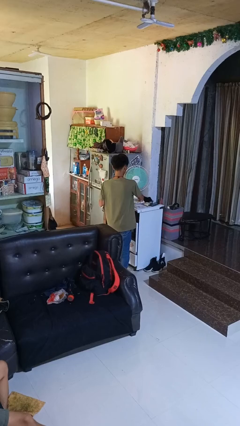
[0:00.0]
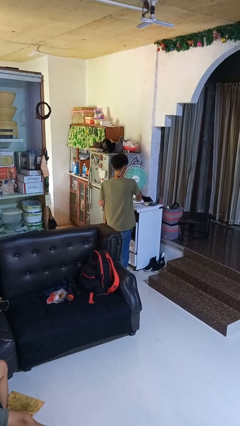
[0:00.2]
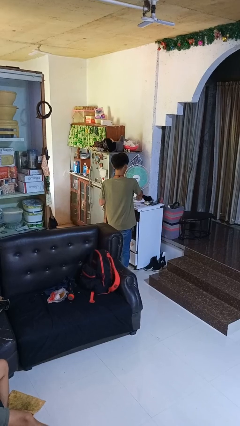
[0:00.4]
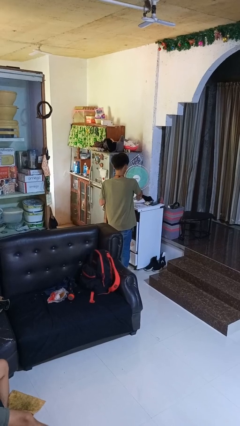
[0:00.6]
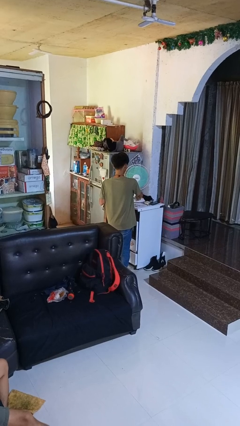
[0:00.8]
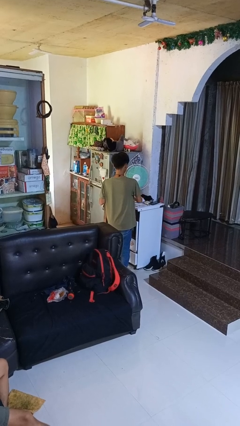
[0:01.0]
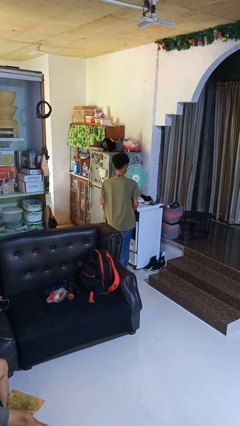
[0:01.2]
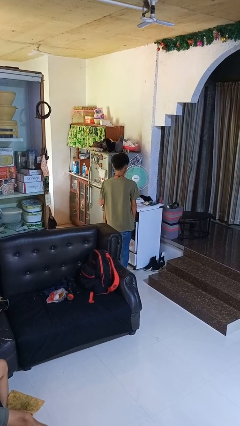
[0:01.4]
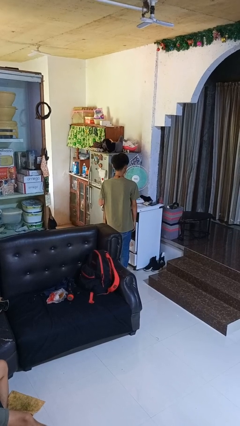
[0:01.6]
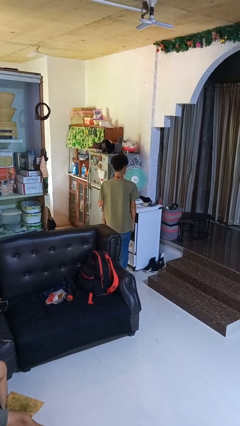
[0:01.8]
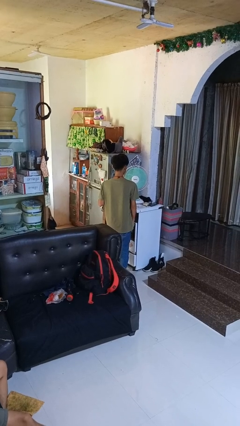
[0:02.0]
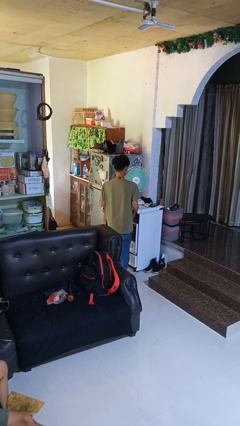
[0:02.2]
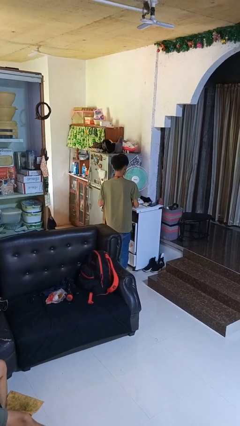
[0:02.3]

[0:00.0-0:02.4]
person turns on fan

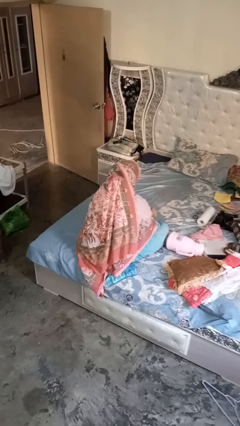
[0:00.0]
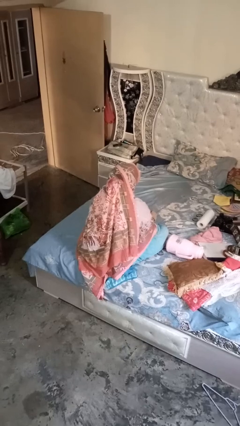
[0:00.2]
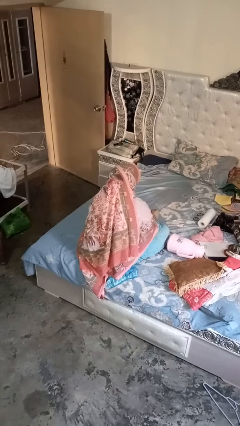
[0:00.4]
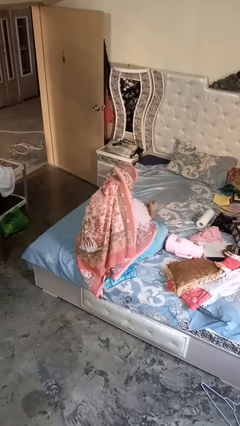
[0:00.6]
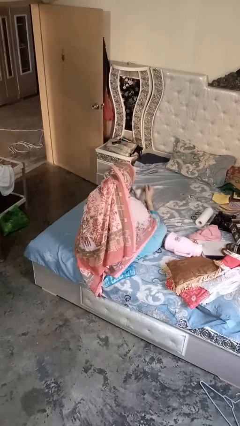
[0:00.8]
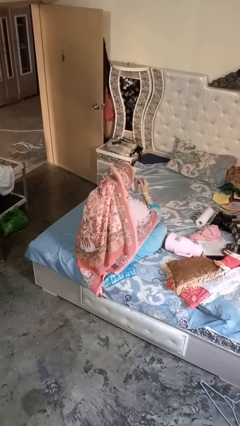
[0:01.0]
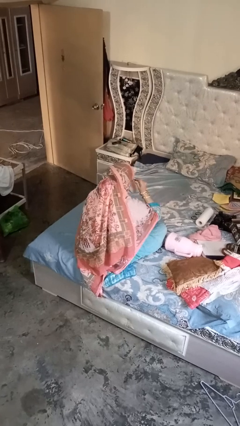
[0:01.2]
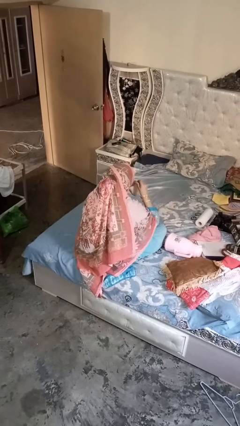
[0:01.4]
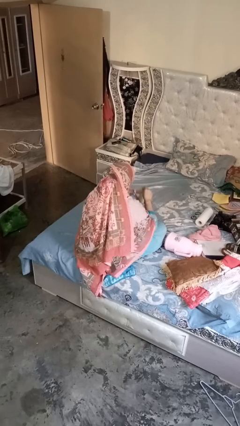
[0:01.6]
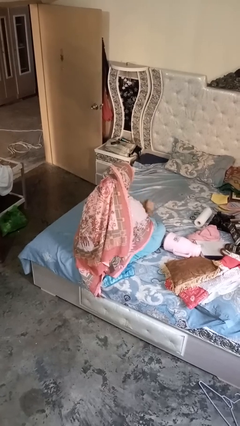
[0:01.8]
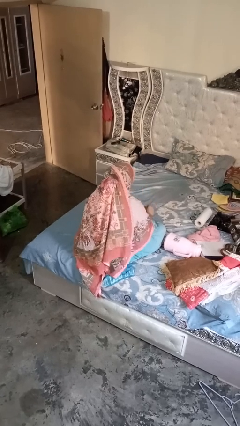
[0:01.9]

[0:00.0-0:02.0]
person drinks from mug

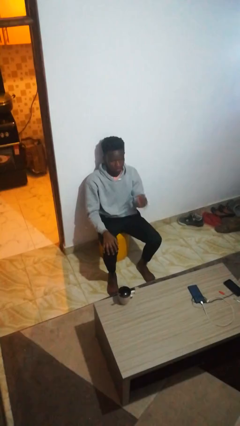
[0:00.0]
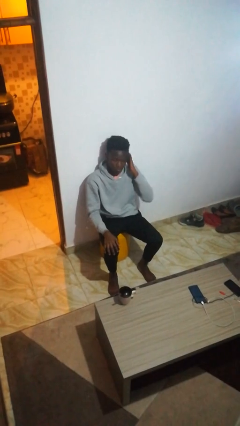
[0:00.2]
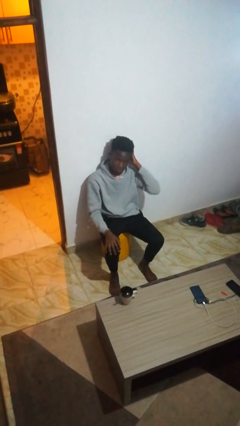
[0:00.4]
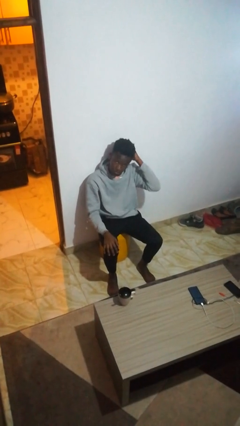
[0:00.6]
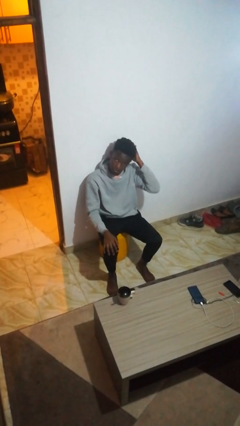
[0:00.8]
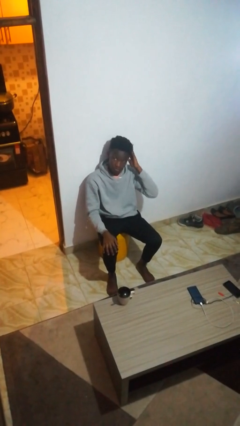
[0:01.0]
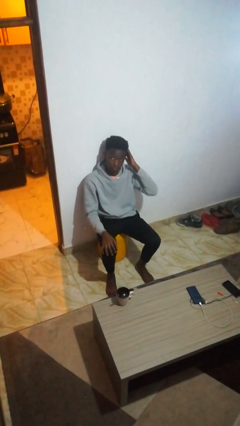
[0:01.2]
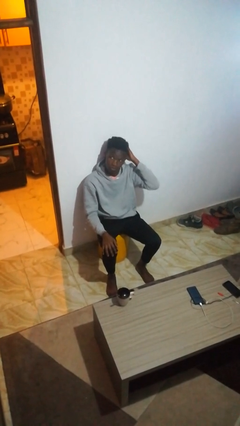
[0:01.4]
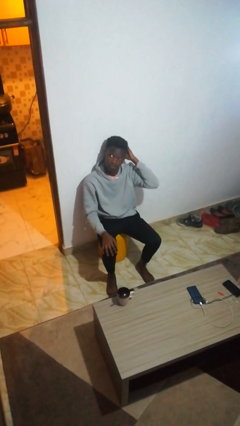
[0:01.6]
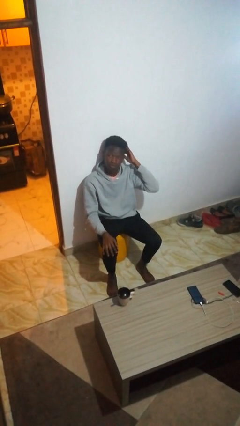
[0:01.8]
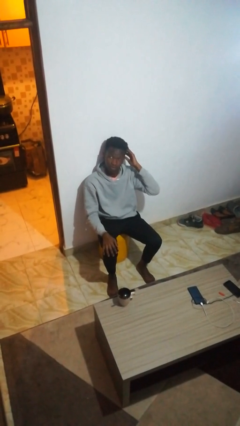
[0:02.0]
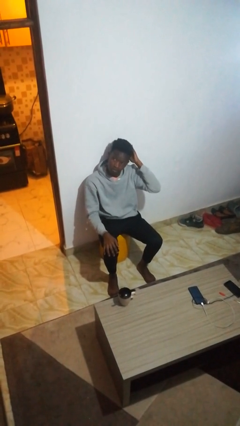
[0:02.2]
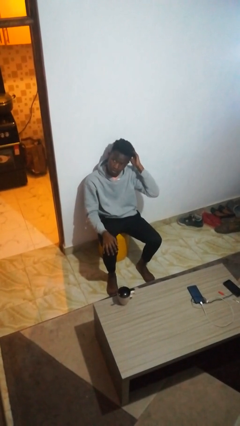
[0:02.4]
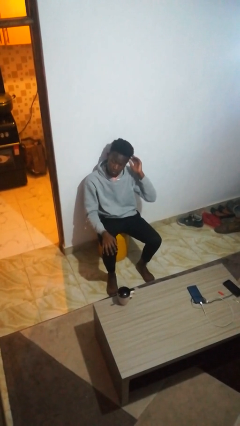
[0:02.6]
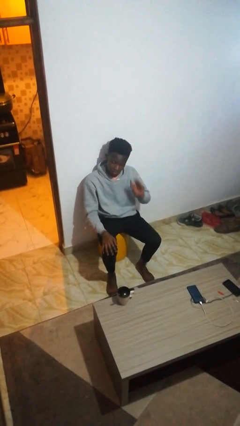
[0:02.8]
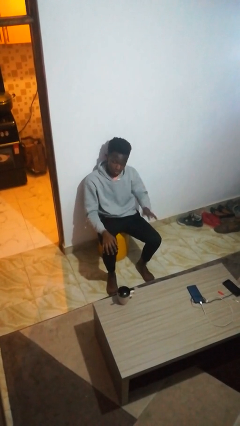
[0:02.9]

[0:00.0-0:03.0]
person strokes hair

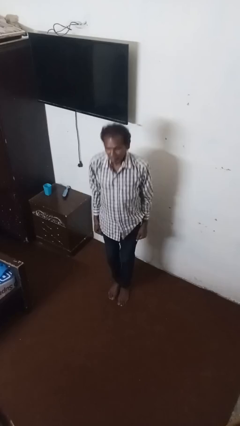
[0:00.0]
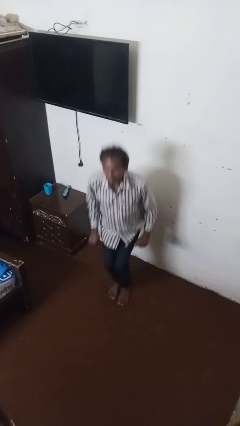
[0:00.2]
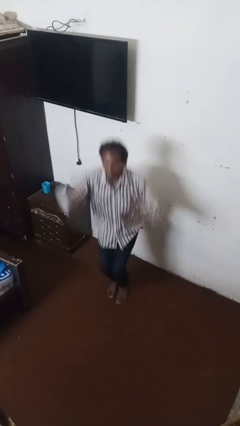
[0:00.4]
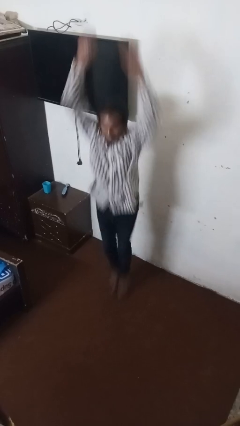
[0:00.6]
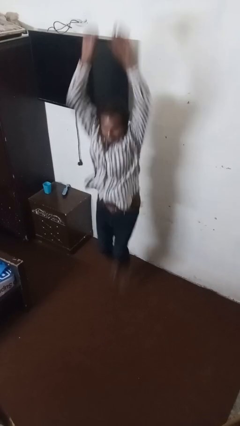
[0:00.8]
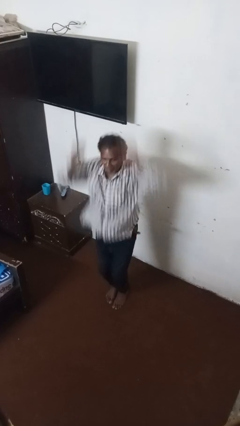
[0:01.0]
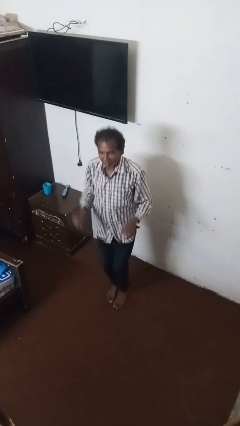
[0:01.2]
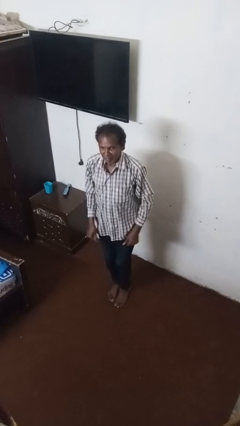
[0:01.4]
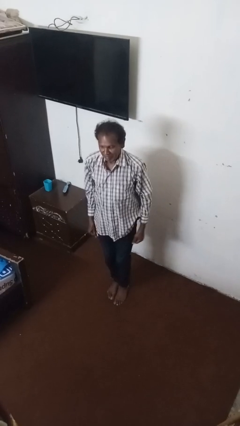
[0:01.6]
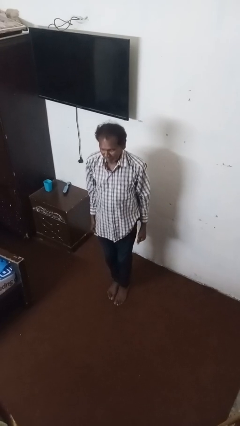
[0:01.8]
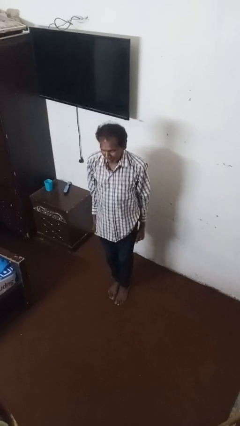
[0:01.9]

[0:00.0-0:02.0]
person jumps

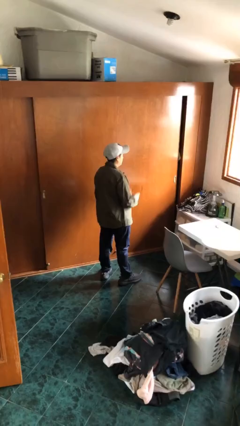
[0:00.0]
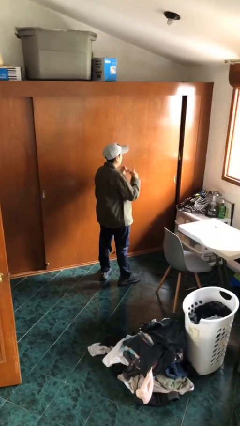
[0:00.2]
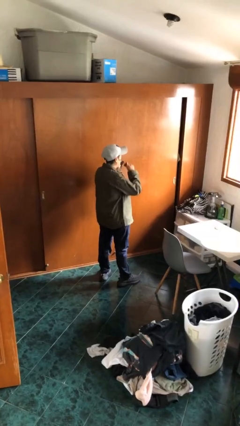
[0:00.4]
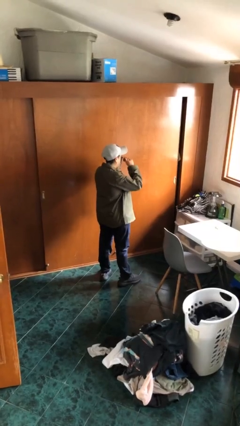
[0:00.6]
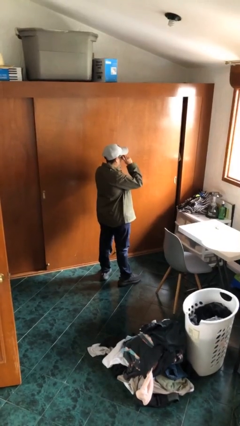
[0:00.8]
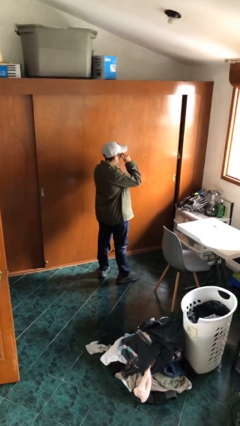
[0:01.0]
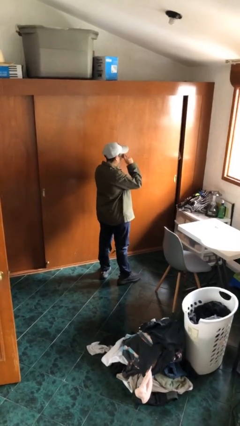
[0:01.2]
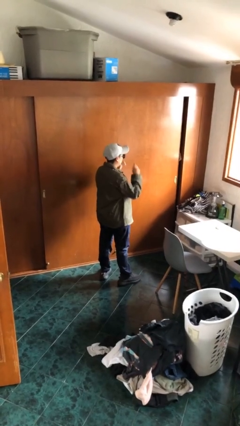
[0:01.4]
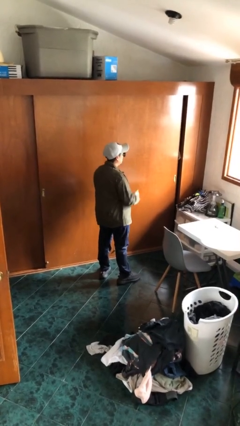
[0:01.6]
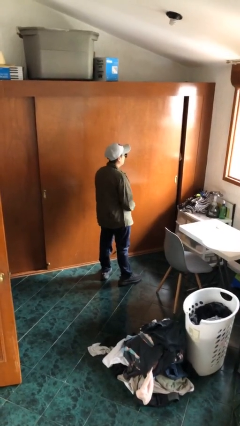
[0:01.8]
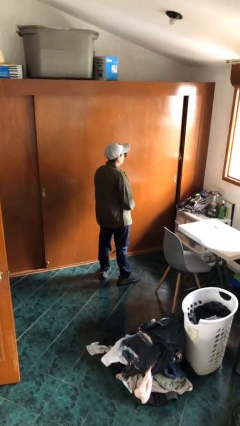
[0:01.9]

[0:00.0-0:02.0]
person puts on sunglasses

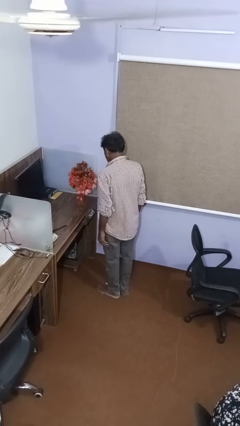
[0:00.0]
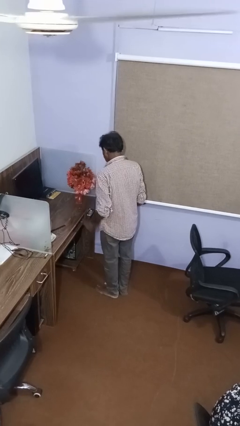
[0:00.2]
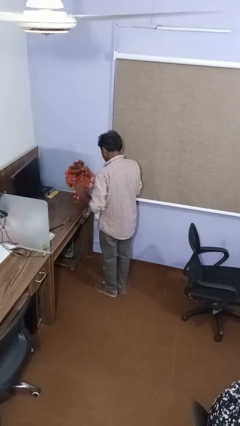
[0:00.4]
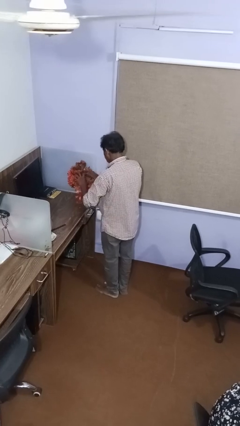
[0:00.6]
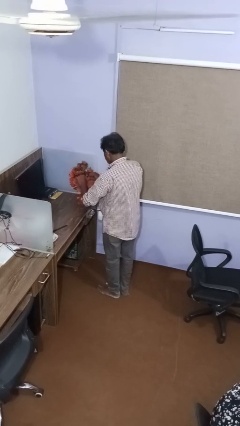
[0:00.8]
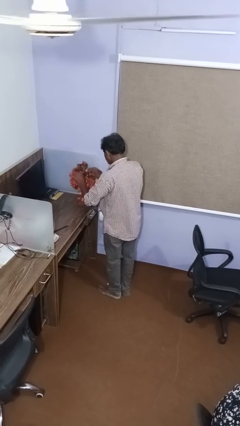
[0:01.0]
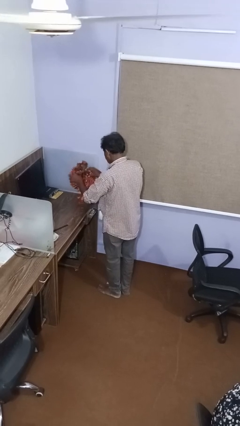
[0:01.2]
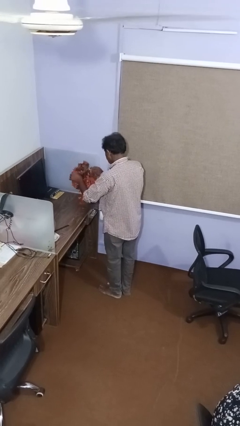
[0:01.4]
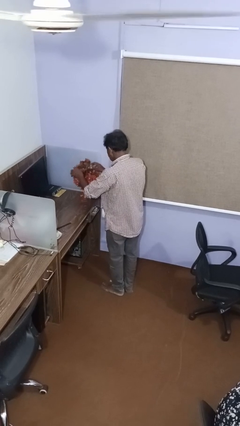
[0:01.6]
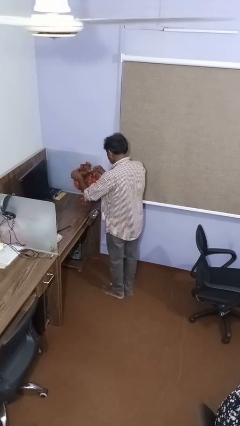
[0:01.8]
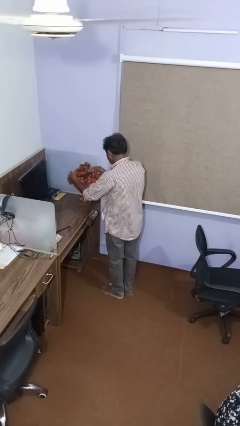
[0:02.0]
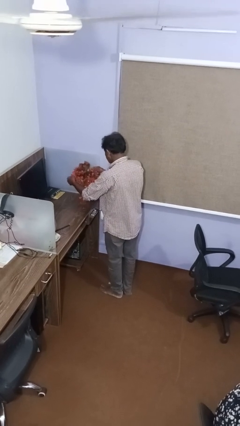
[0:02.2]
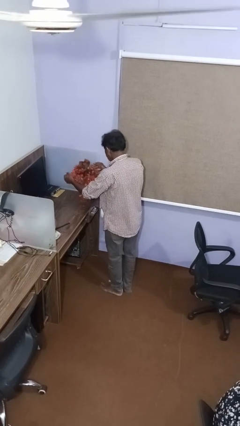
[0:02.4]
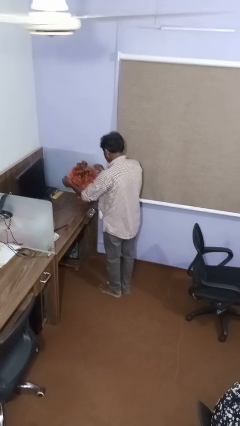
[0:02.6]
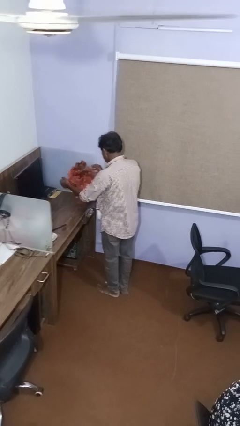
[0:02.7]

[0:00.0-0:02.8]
person arranges flowers in vase

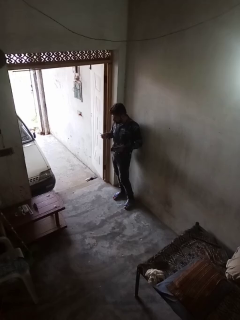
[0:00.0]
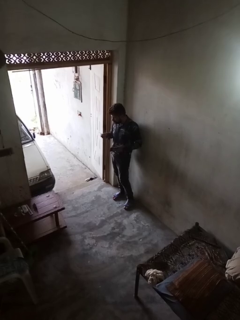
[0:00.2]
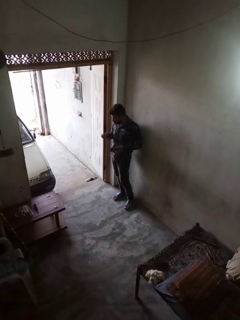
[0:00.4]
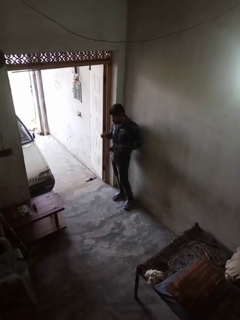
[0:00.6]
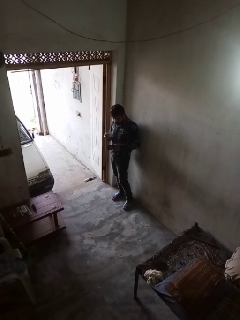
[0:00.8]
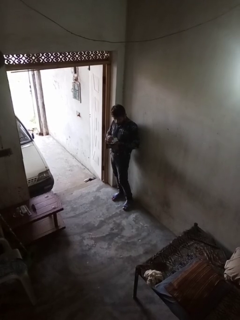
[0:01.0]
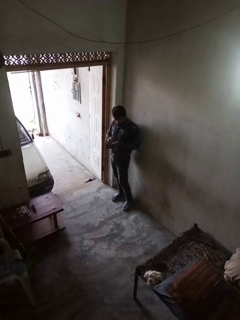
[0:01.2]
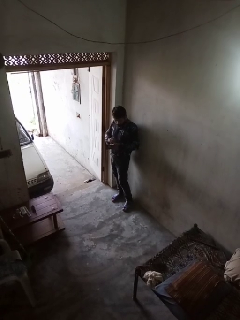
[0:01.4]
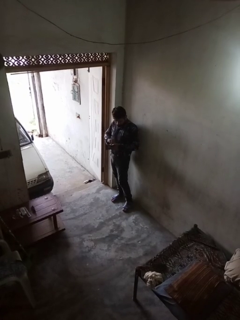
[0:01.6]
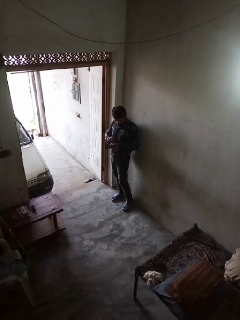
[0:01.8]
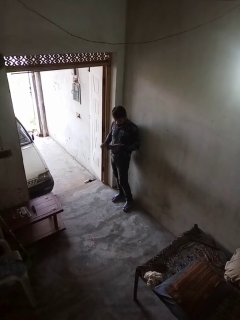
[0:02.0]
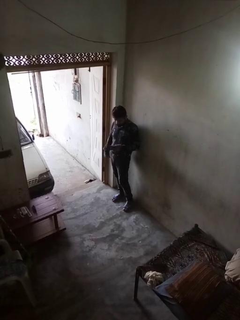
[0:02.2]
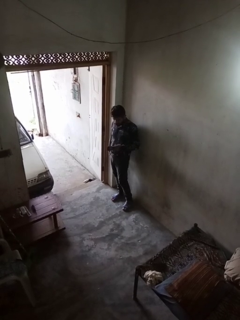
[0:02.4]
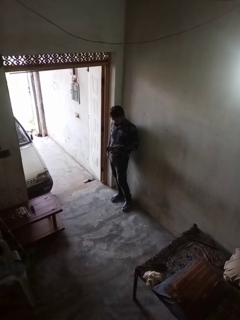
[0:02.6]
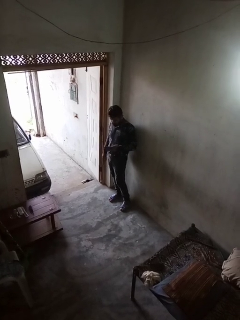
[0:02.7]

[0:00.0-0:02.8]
person puts object into purse

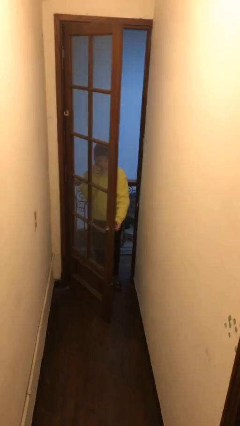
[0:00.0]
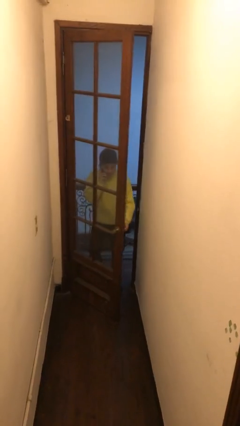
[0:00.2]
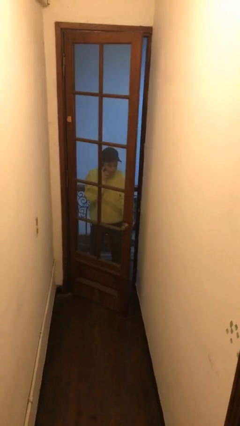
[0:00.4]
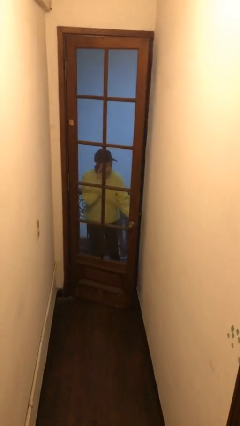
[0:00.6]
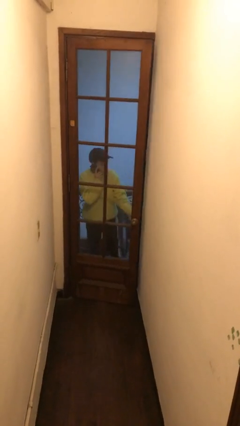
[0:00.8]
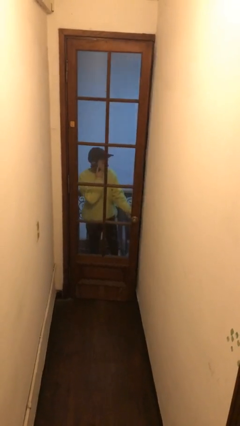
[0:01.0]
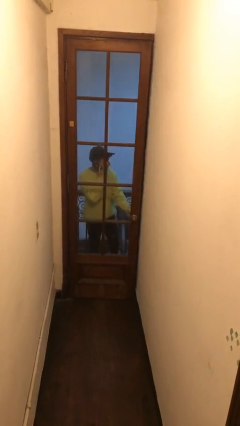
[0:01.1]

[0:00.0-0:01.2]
person closes facility door
